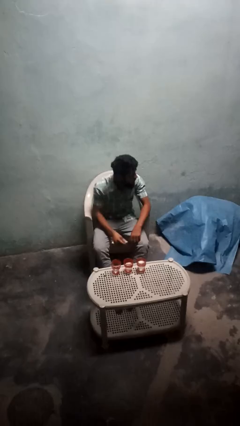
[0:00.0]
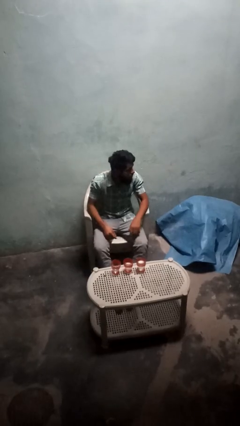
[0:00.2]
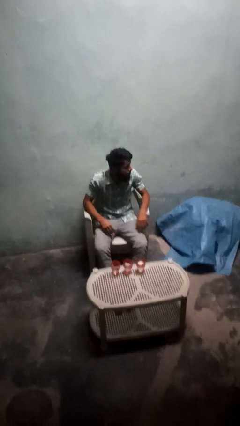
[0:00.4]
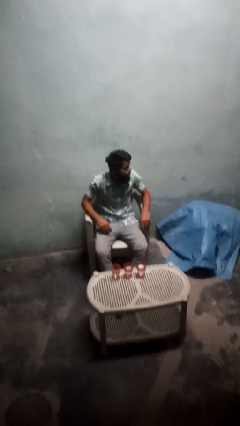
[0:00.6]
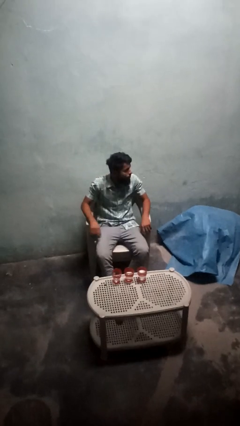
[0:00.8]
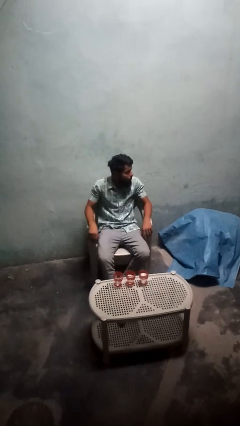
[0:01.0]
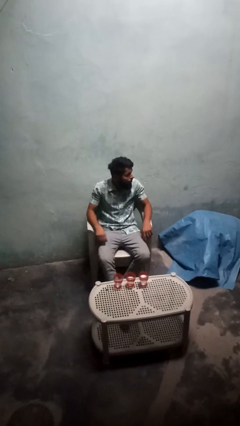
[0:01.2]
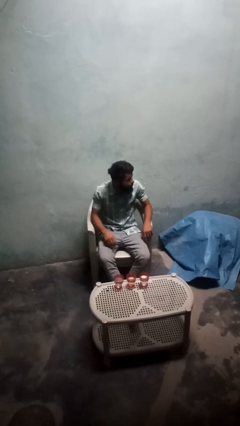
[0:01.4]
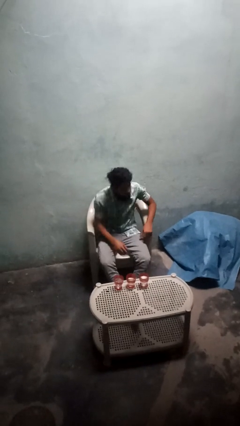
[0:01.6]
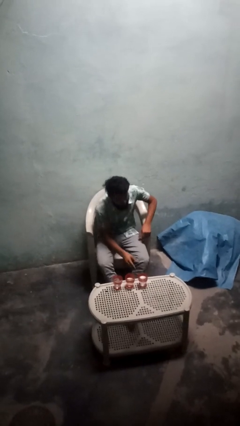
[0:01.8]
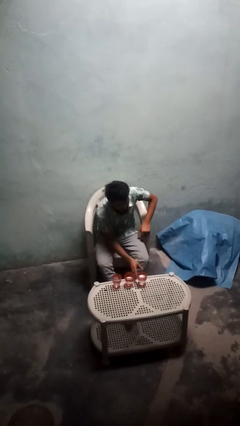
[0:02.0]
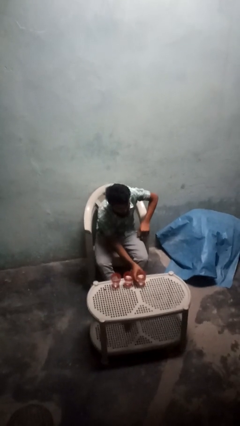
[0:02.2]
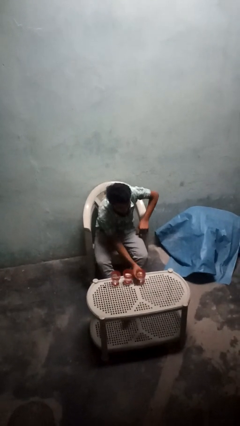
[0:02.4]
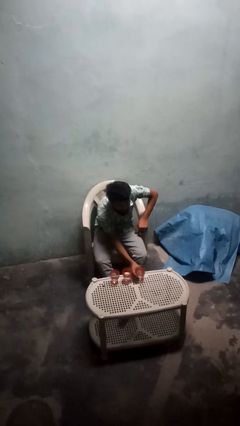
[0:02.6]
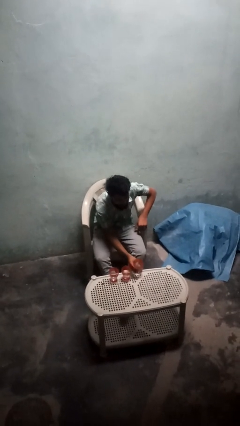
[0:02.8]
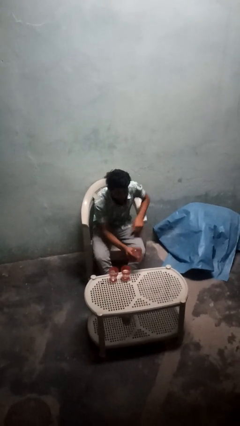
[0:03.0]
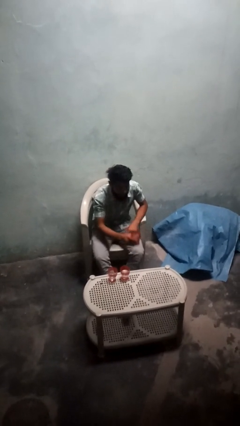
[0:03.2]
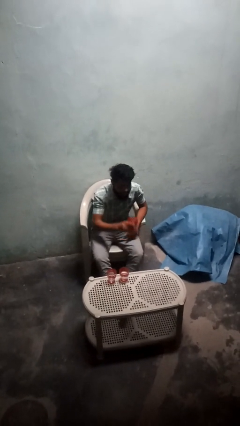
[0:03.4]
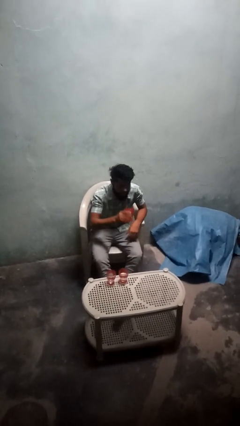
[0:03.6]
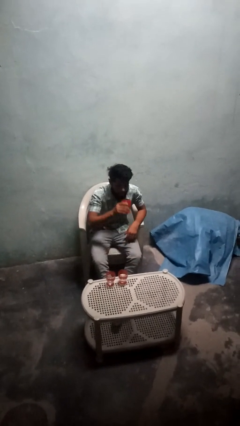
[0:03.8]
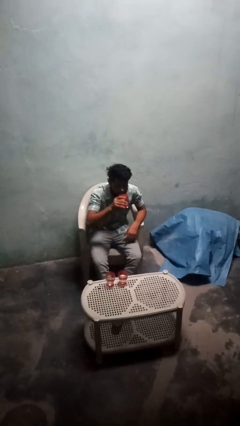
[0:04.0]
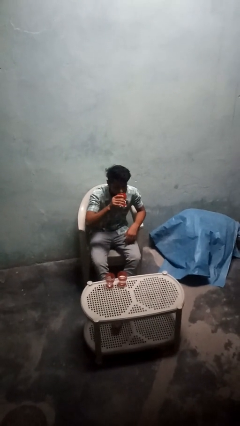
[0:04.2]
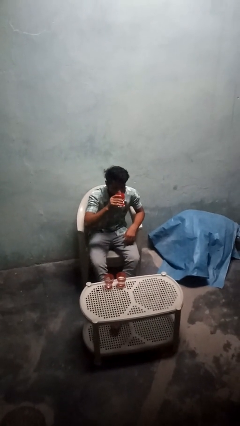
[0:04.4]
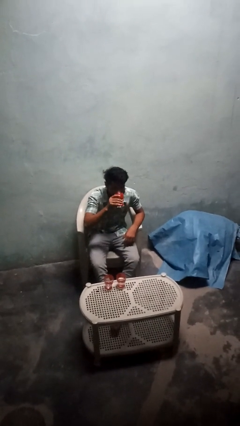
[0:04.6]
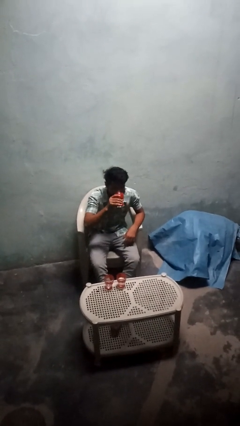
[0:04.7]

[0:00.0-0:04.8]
person picks up object from table

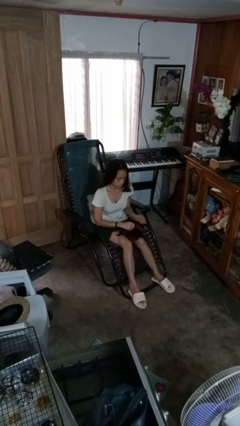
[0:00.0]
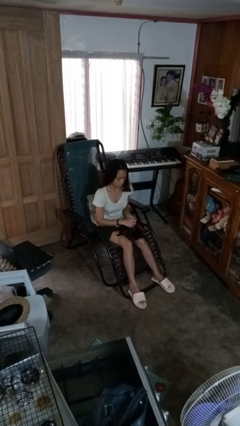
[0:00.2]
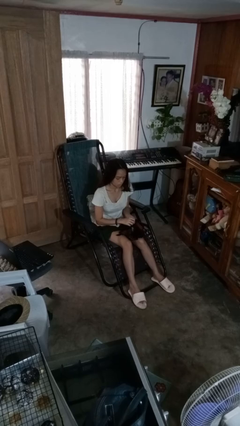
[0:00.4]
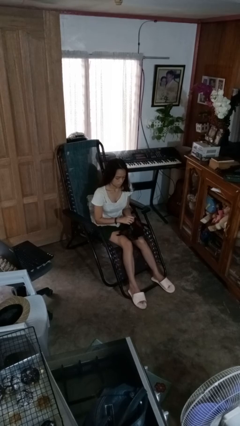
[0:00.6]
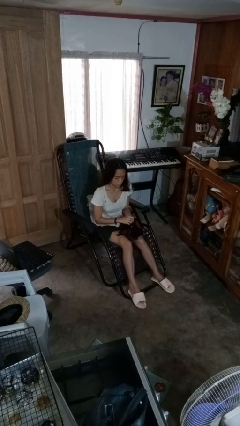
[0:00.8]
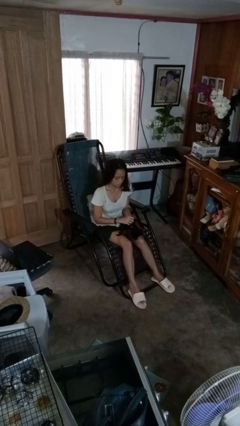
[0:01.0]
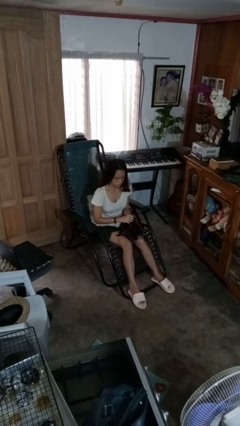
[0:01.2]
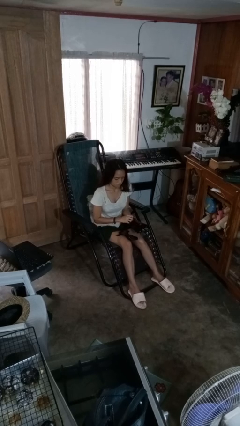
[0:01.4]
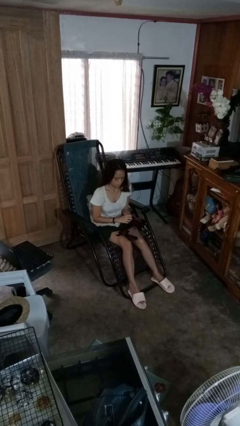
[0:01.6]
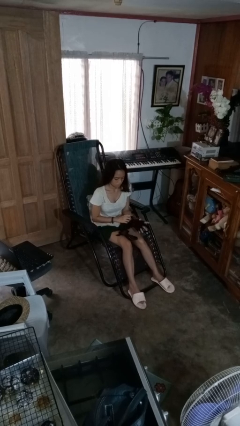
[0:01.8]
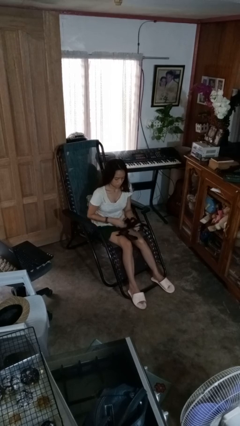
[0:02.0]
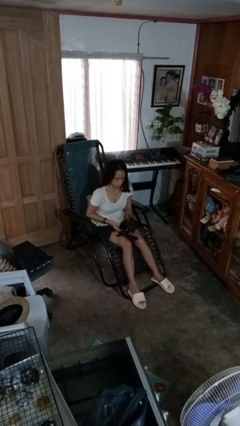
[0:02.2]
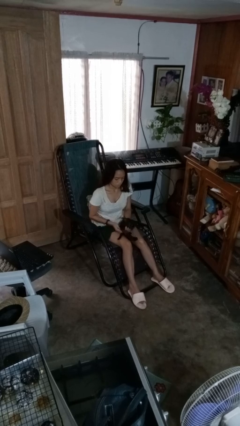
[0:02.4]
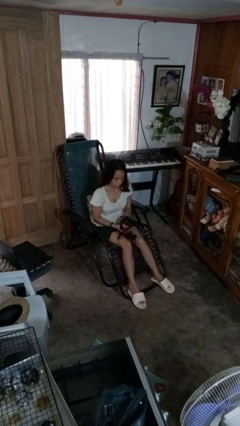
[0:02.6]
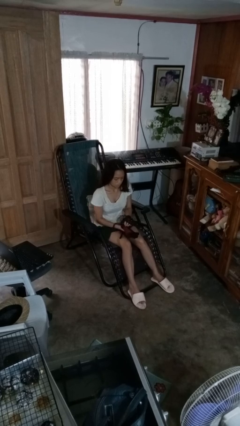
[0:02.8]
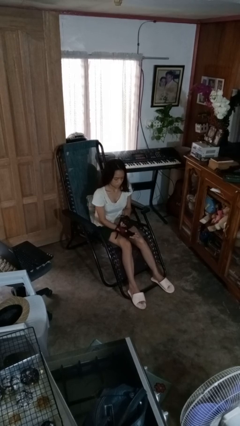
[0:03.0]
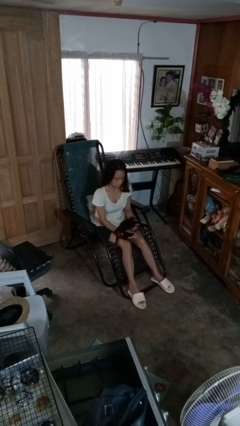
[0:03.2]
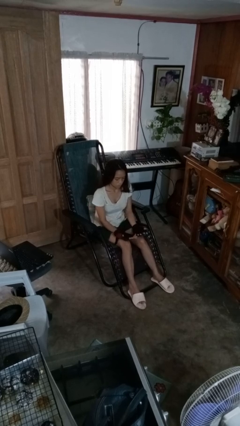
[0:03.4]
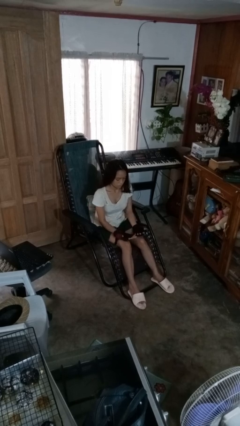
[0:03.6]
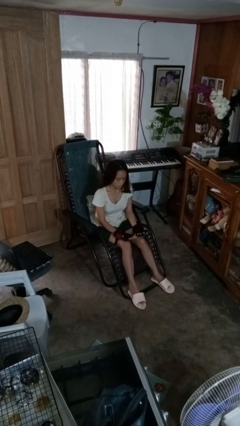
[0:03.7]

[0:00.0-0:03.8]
person puts on gloves

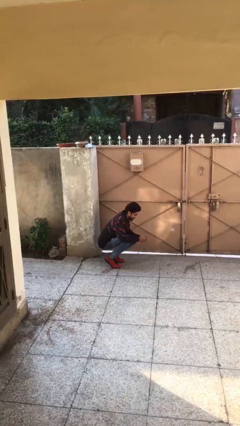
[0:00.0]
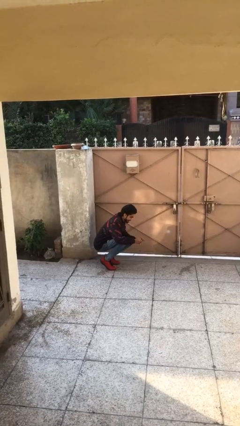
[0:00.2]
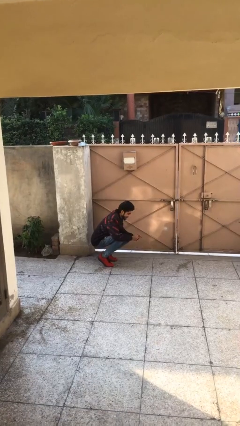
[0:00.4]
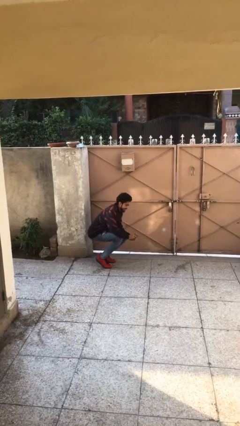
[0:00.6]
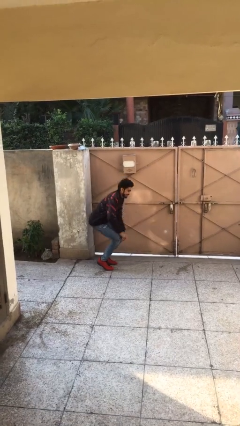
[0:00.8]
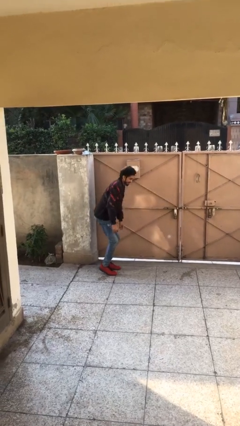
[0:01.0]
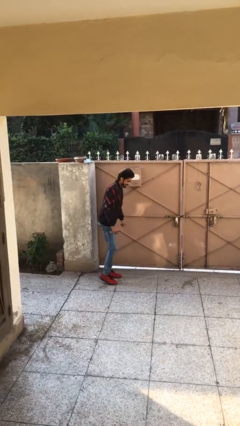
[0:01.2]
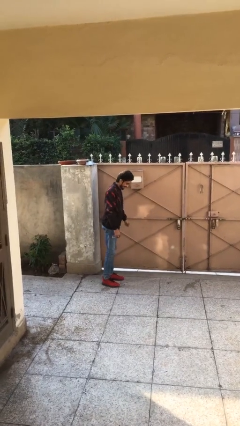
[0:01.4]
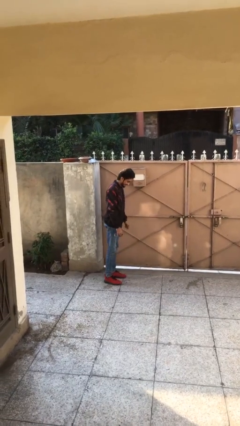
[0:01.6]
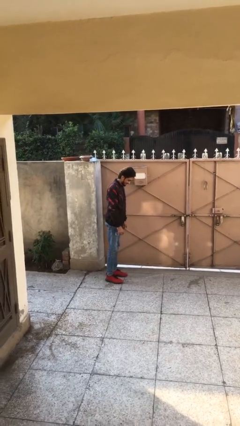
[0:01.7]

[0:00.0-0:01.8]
person stands up

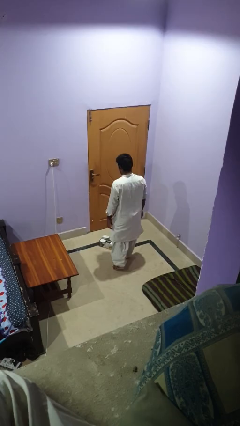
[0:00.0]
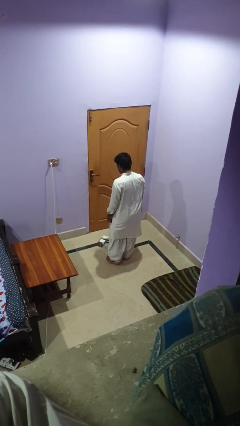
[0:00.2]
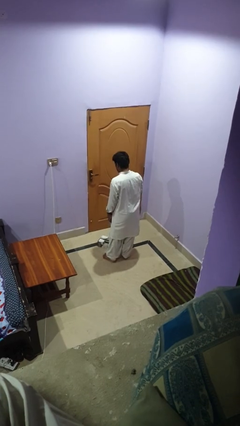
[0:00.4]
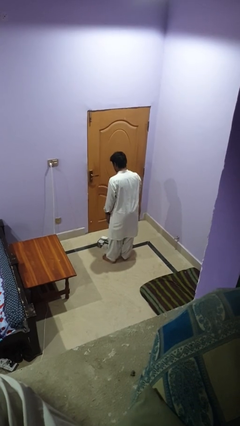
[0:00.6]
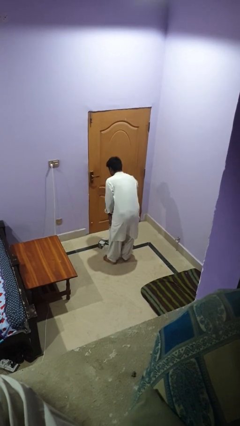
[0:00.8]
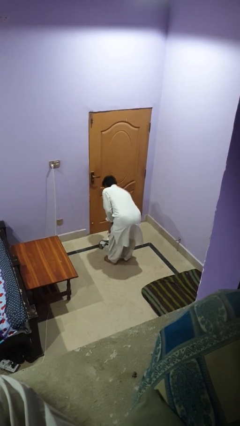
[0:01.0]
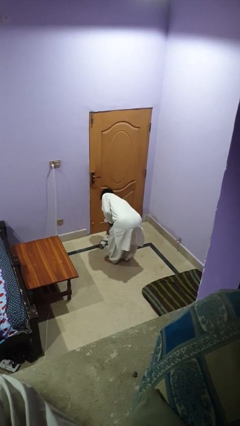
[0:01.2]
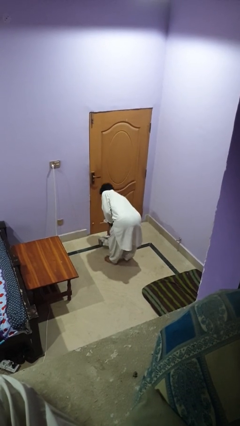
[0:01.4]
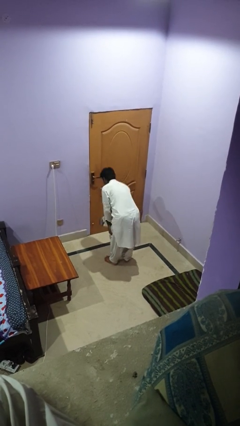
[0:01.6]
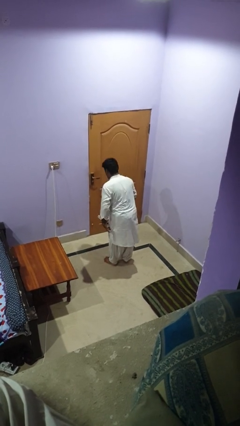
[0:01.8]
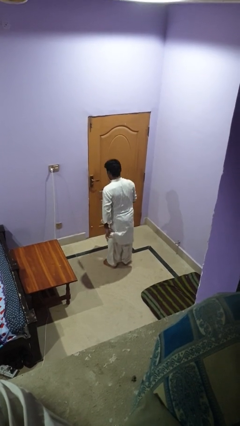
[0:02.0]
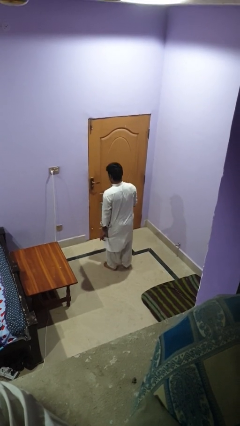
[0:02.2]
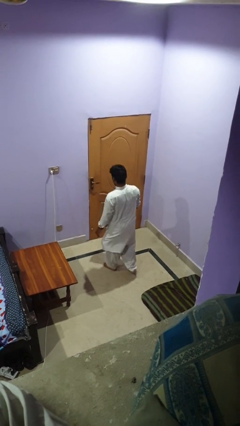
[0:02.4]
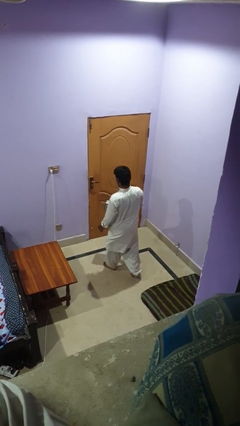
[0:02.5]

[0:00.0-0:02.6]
person picks up object from floor

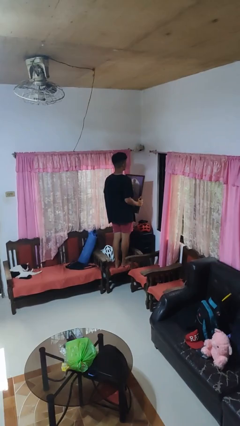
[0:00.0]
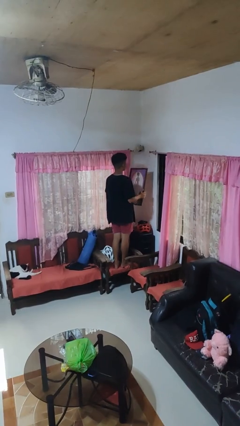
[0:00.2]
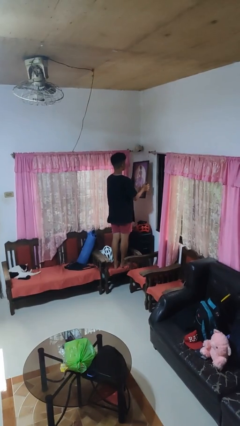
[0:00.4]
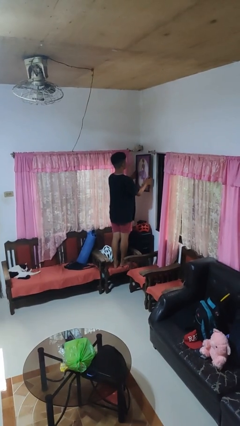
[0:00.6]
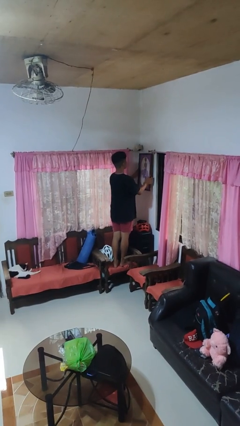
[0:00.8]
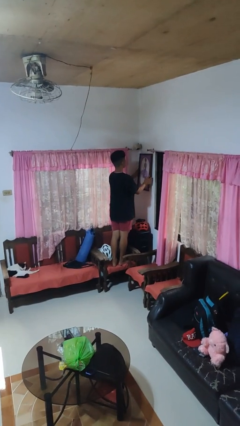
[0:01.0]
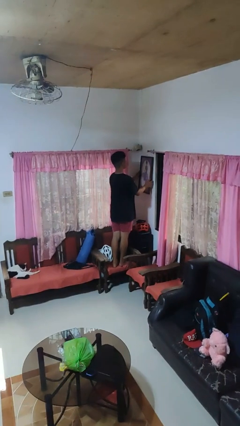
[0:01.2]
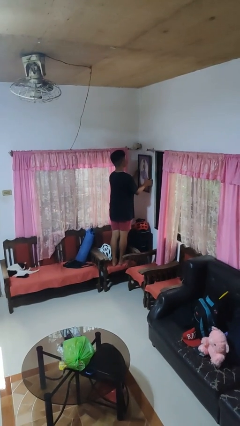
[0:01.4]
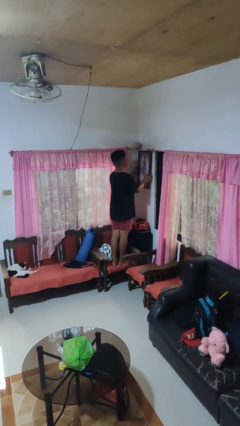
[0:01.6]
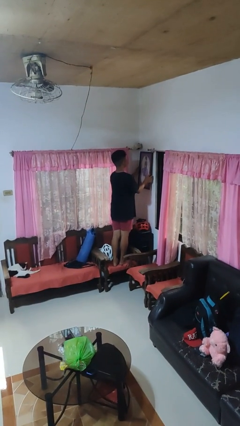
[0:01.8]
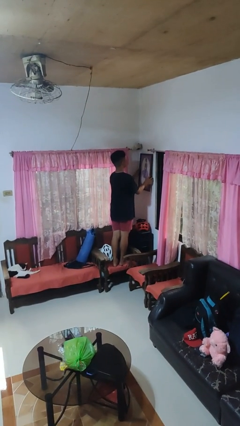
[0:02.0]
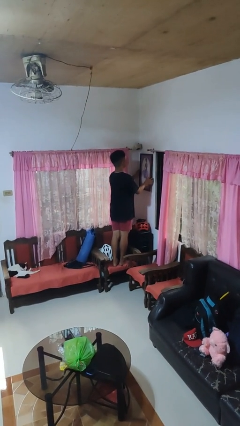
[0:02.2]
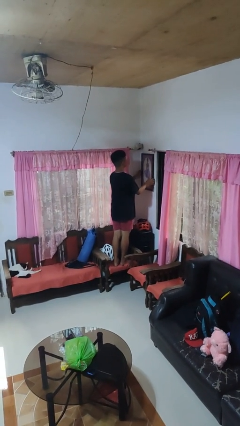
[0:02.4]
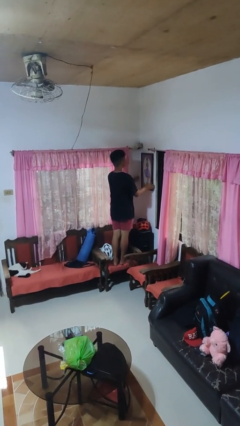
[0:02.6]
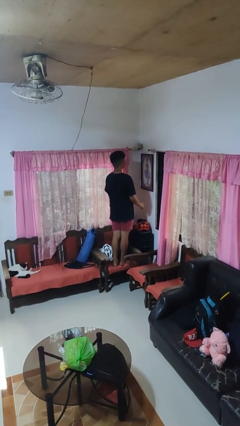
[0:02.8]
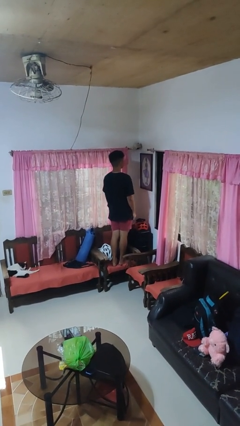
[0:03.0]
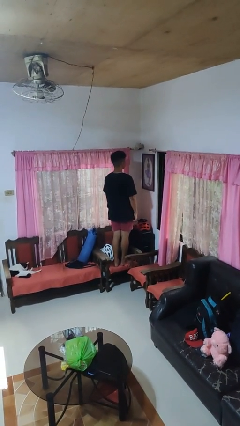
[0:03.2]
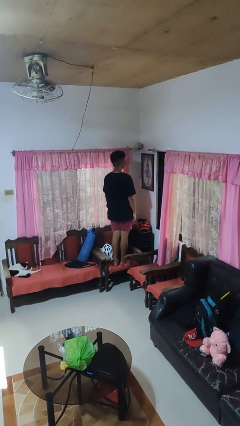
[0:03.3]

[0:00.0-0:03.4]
person puts up picture frame

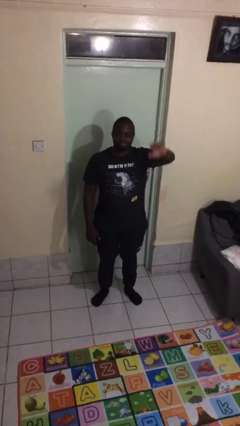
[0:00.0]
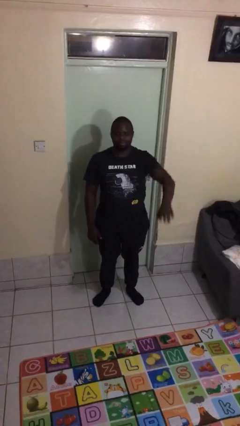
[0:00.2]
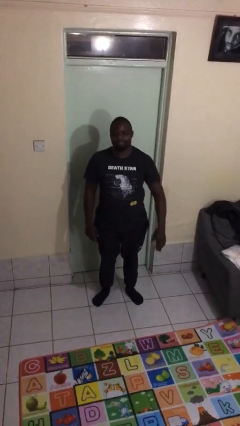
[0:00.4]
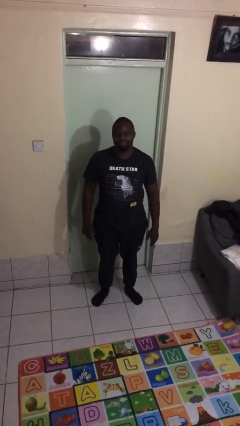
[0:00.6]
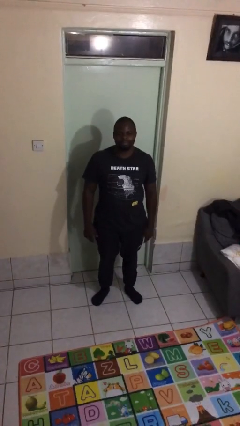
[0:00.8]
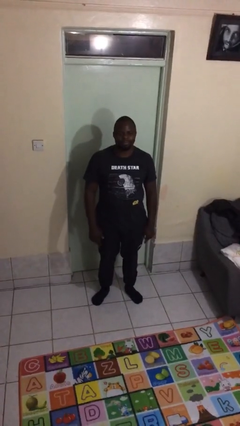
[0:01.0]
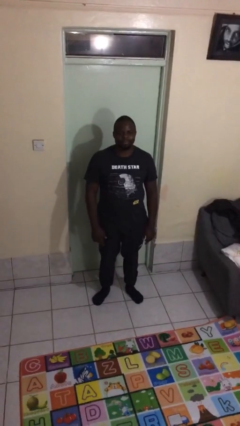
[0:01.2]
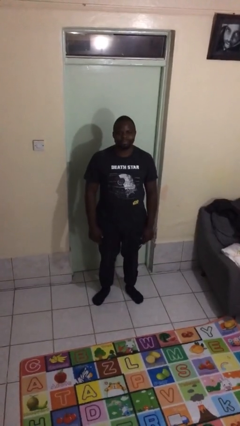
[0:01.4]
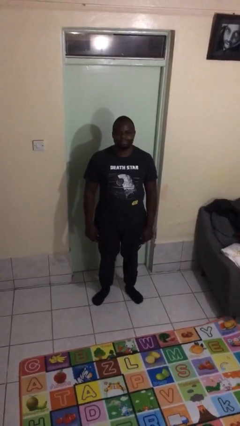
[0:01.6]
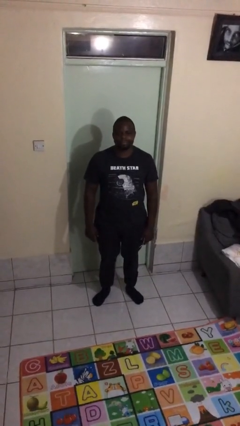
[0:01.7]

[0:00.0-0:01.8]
person gestures lower hand
